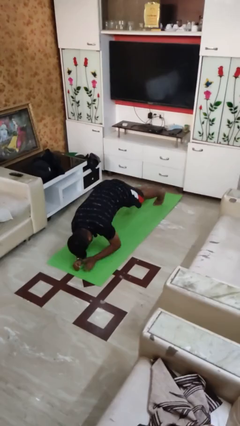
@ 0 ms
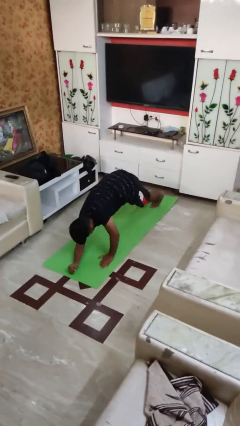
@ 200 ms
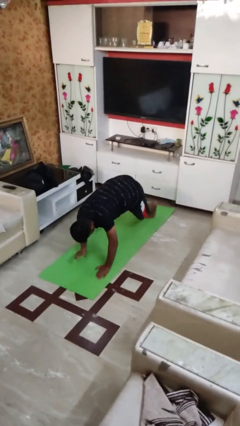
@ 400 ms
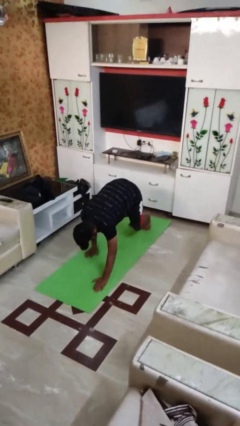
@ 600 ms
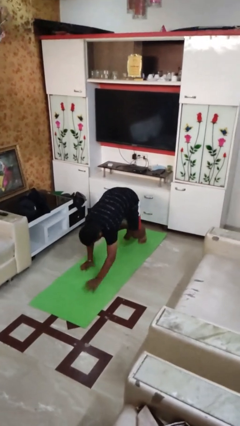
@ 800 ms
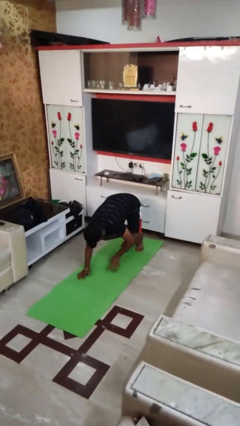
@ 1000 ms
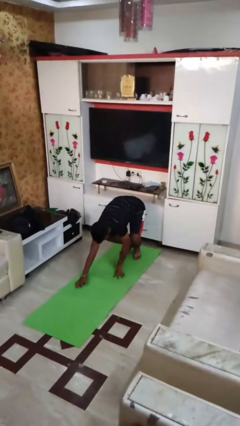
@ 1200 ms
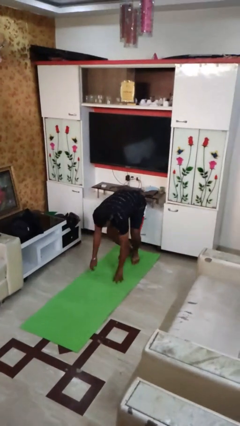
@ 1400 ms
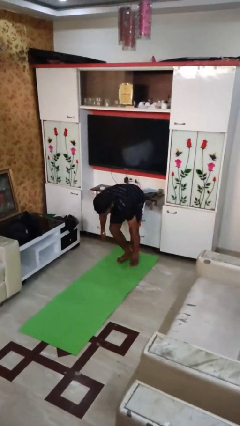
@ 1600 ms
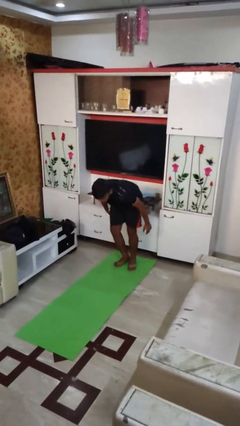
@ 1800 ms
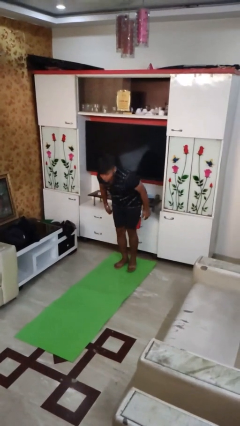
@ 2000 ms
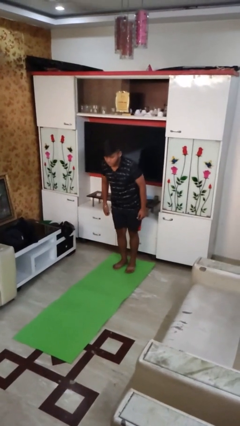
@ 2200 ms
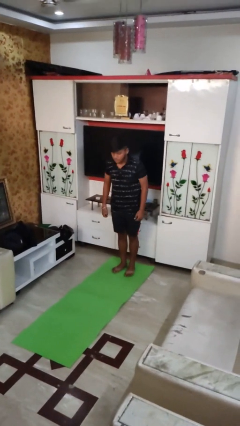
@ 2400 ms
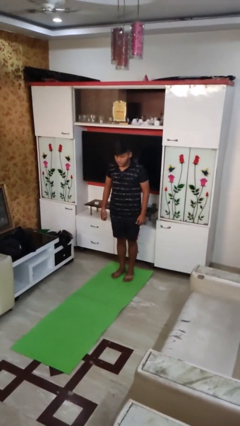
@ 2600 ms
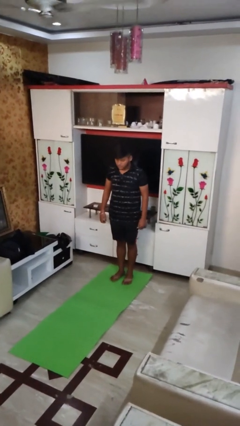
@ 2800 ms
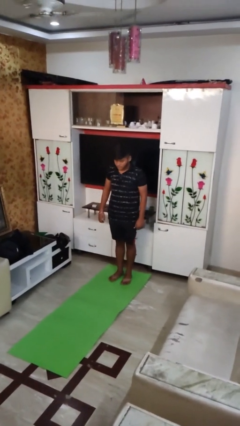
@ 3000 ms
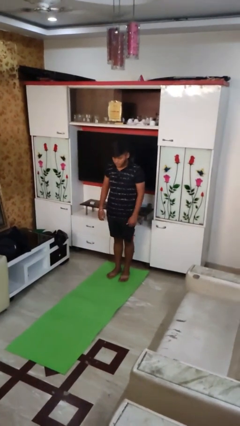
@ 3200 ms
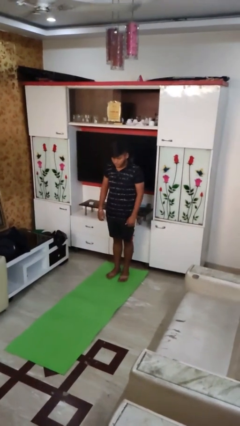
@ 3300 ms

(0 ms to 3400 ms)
person stands up from floor

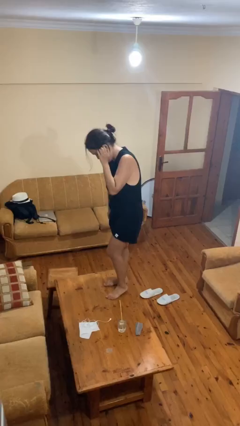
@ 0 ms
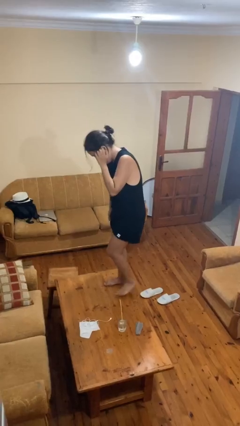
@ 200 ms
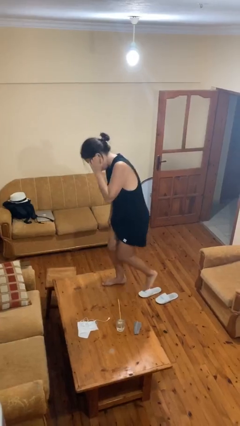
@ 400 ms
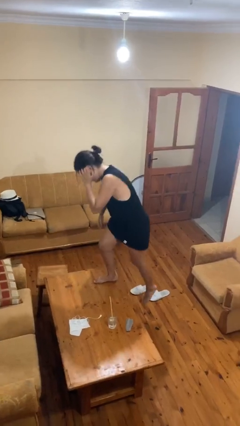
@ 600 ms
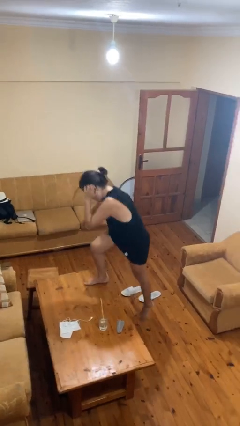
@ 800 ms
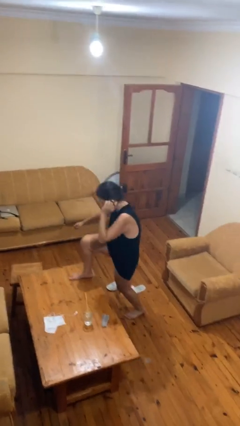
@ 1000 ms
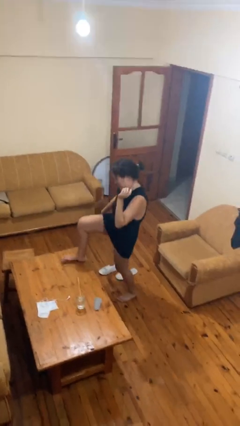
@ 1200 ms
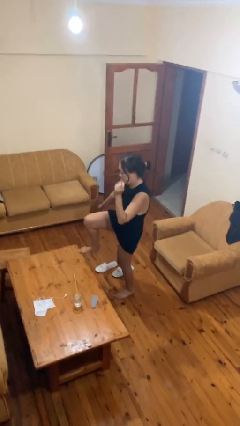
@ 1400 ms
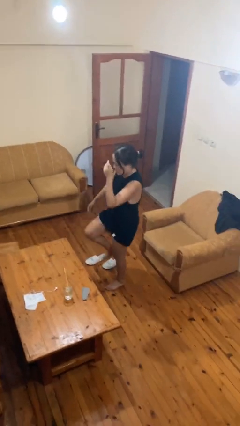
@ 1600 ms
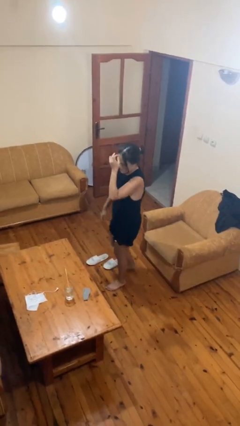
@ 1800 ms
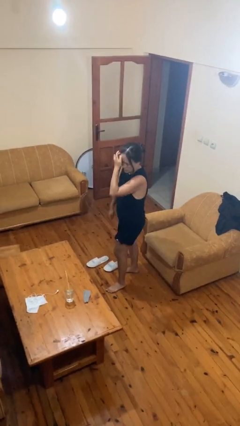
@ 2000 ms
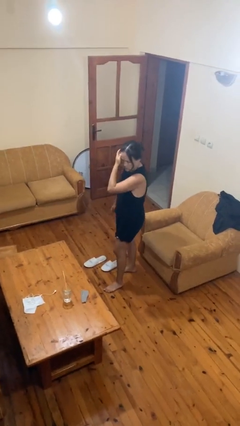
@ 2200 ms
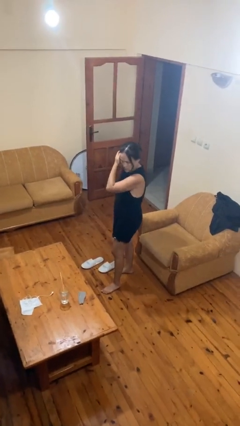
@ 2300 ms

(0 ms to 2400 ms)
person climbs off table

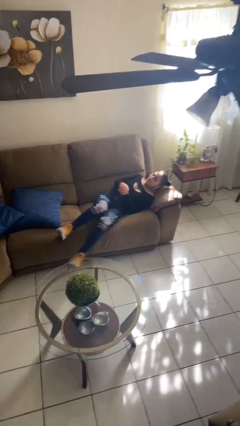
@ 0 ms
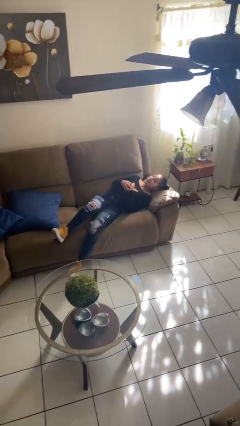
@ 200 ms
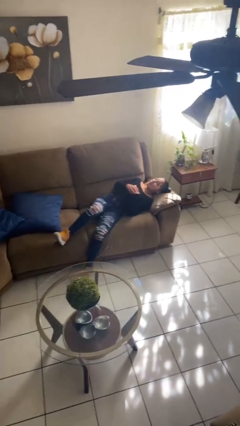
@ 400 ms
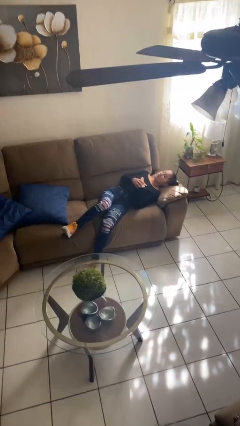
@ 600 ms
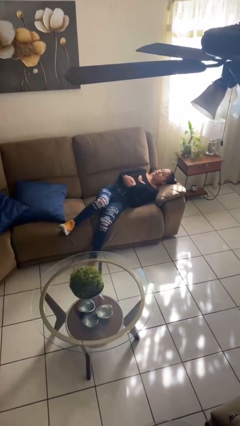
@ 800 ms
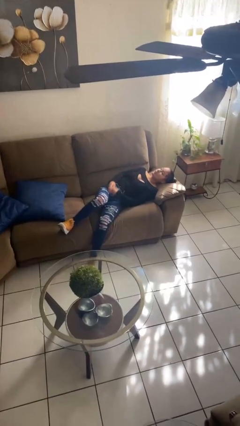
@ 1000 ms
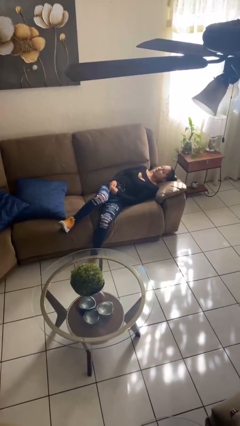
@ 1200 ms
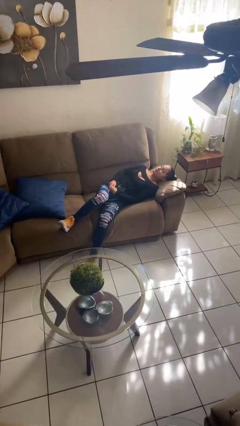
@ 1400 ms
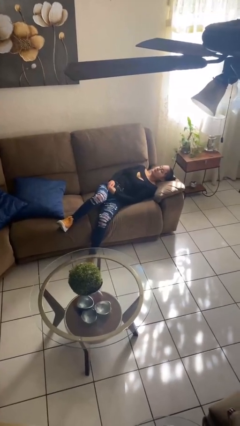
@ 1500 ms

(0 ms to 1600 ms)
person lies down on bed

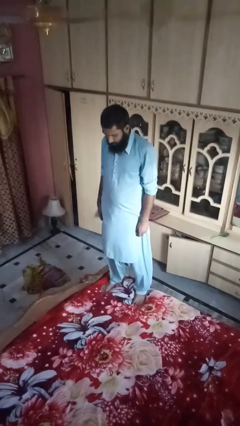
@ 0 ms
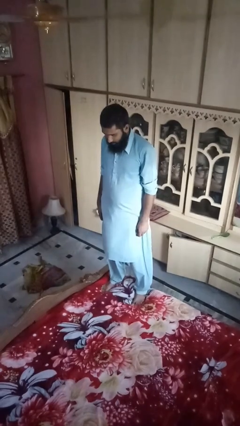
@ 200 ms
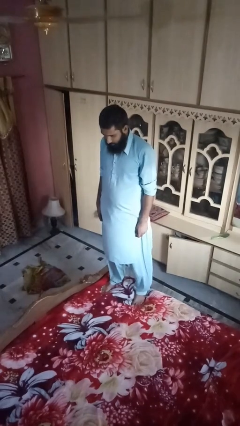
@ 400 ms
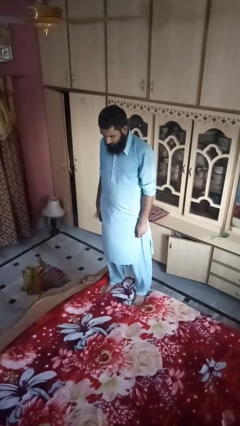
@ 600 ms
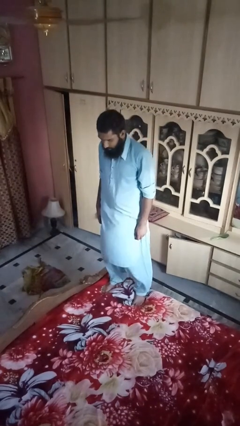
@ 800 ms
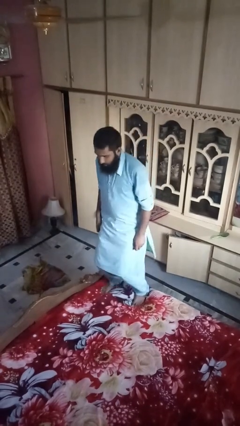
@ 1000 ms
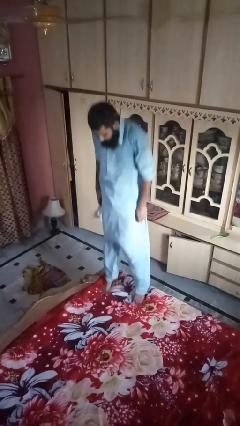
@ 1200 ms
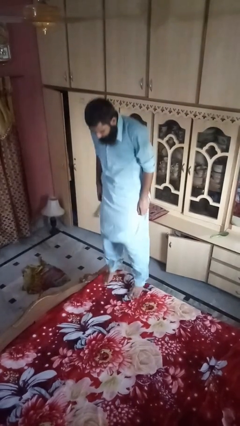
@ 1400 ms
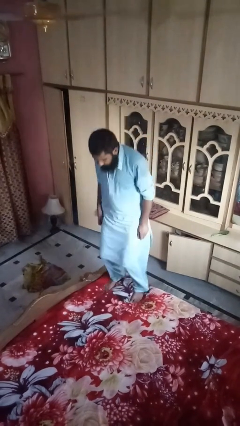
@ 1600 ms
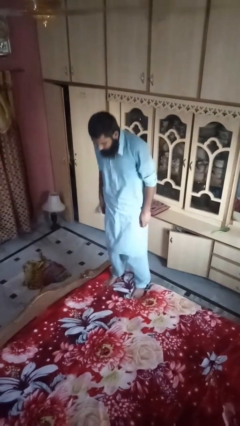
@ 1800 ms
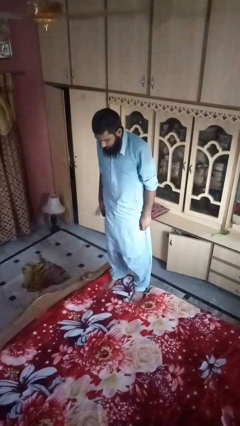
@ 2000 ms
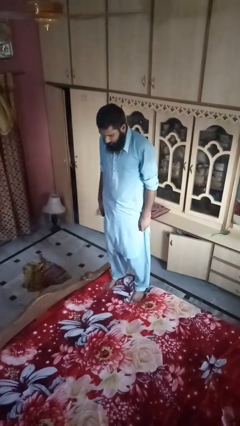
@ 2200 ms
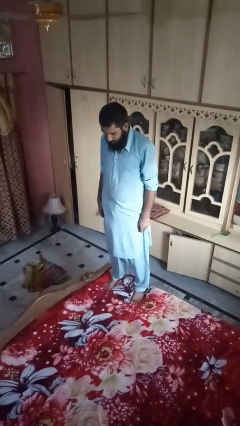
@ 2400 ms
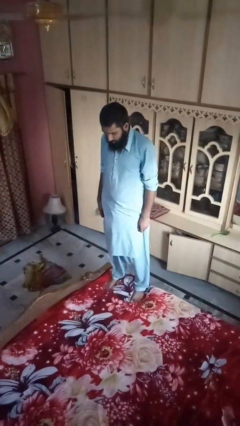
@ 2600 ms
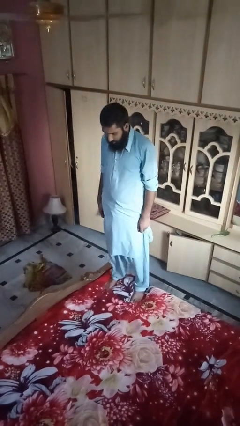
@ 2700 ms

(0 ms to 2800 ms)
person jumps on bed

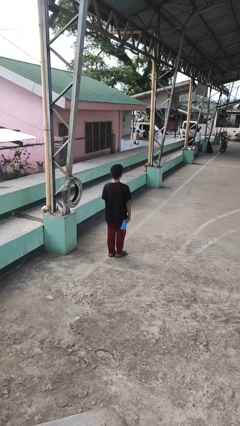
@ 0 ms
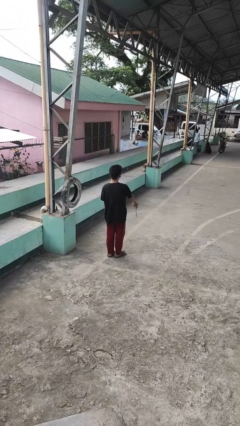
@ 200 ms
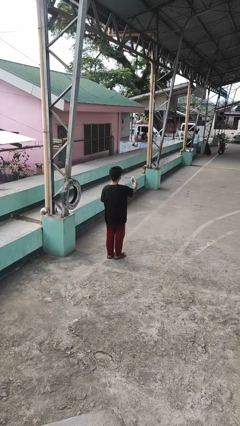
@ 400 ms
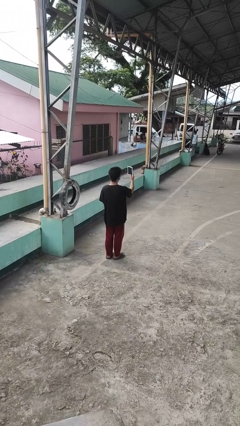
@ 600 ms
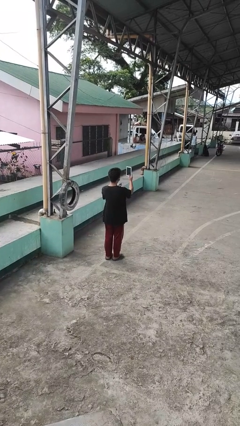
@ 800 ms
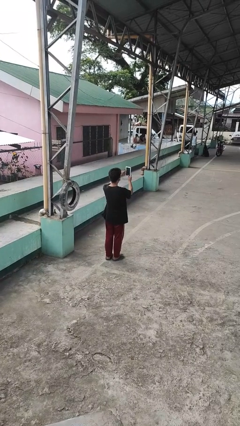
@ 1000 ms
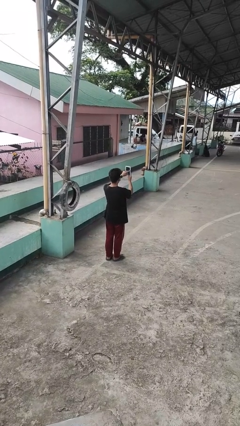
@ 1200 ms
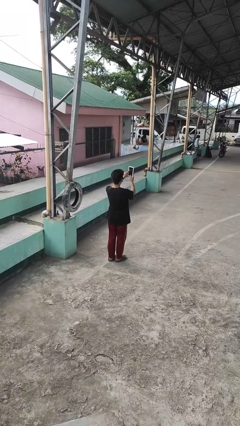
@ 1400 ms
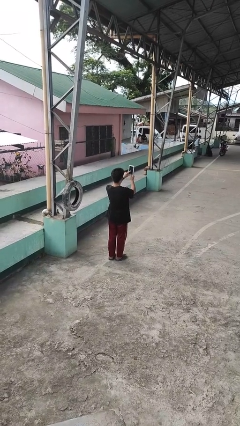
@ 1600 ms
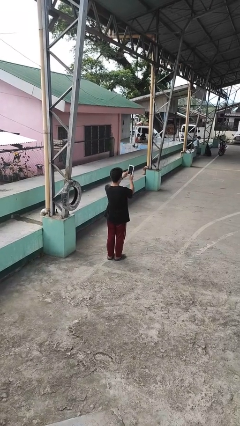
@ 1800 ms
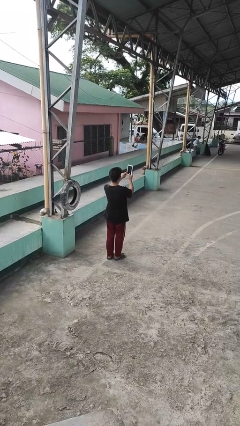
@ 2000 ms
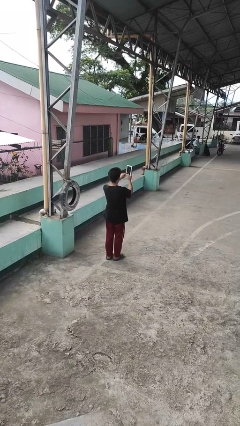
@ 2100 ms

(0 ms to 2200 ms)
person interacts with tablet

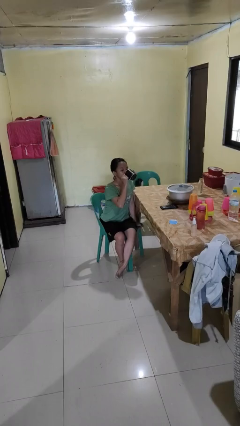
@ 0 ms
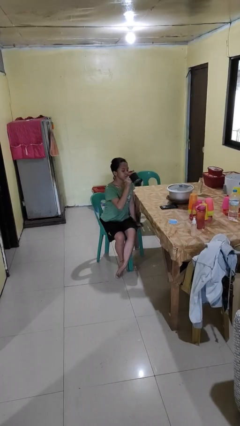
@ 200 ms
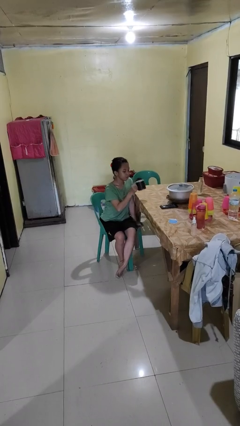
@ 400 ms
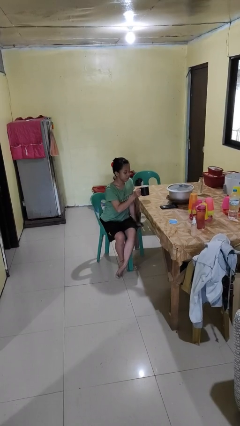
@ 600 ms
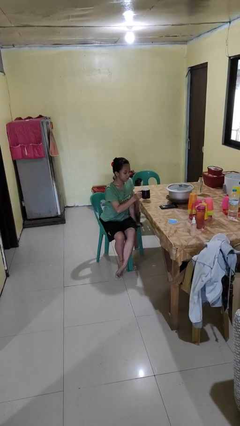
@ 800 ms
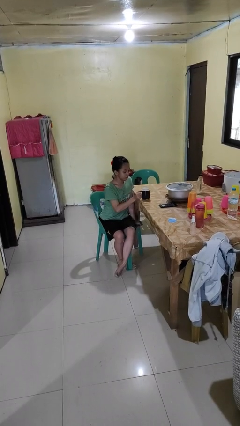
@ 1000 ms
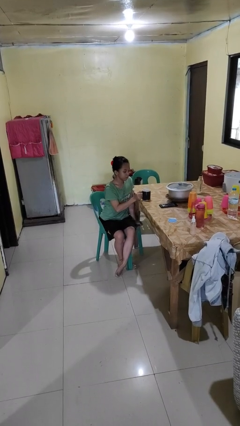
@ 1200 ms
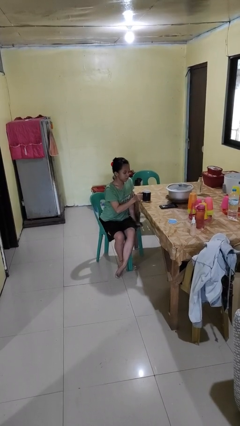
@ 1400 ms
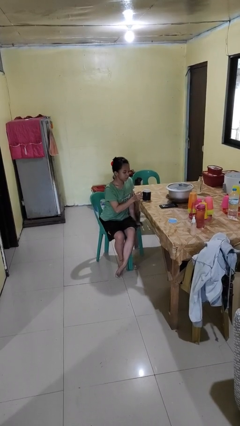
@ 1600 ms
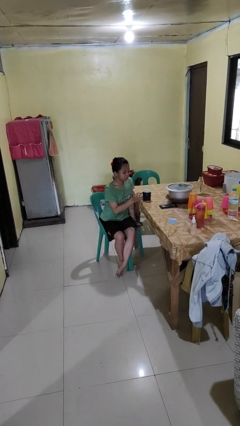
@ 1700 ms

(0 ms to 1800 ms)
person puts down object on table

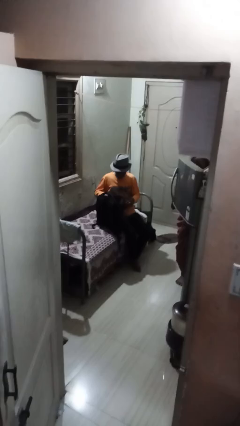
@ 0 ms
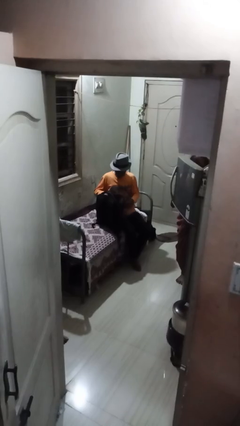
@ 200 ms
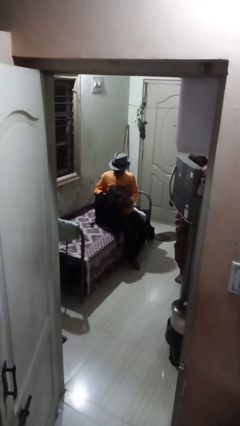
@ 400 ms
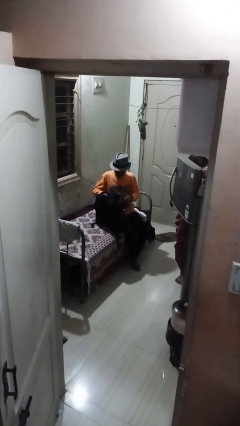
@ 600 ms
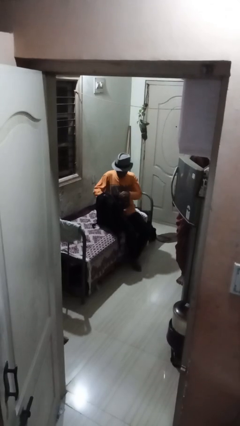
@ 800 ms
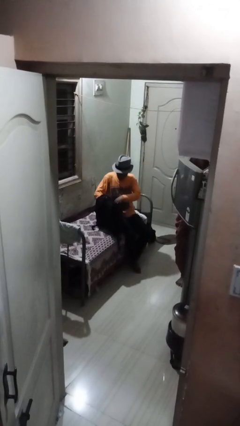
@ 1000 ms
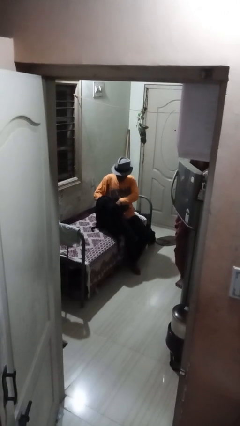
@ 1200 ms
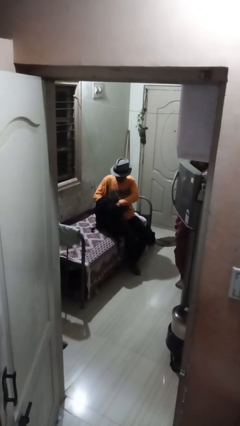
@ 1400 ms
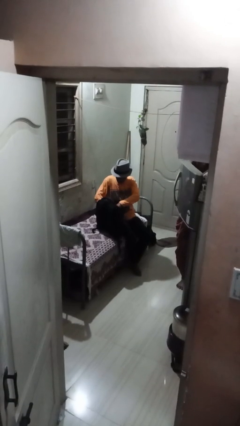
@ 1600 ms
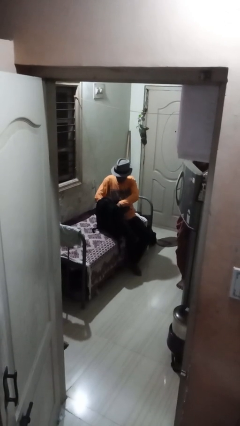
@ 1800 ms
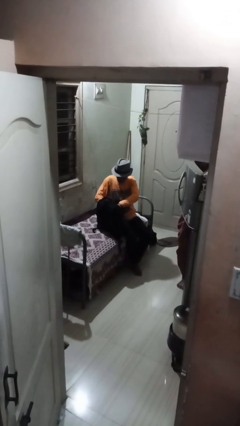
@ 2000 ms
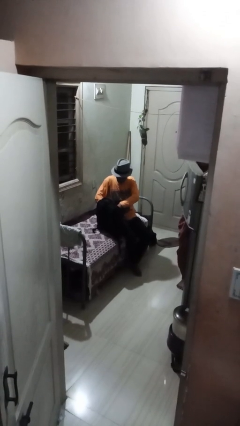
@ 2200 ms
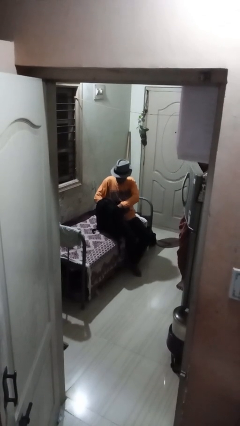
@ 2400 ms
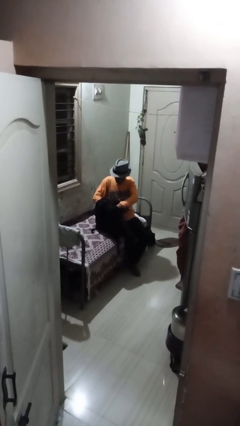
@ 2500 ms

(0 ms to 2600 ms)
person searches in backpack
